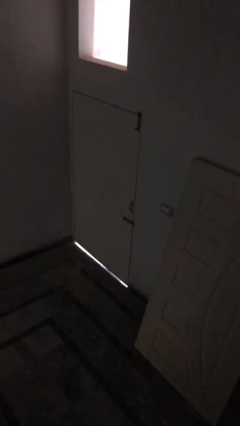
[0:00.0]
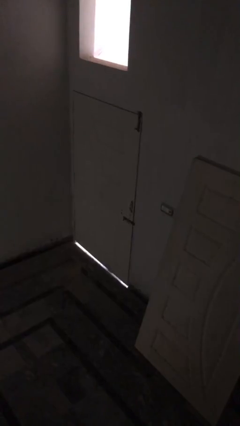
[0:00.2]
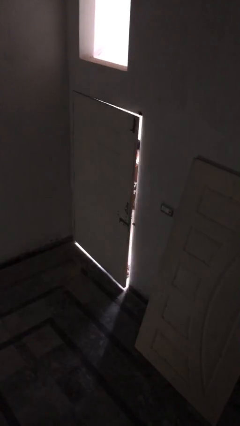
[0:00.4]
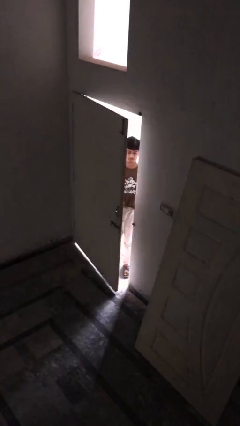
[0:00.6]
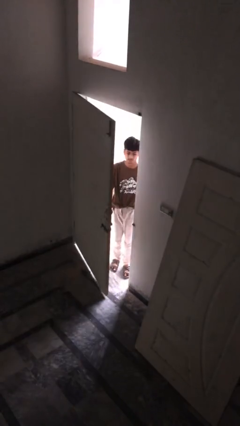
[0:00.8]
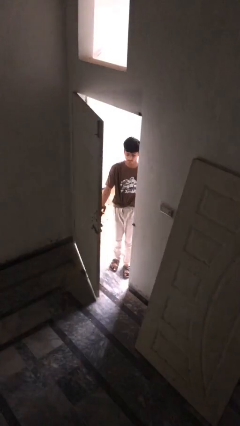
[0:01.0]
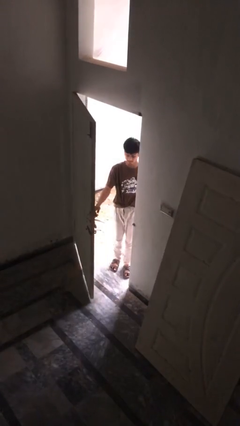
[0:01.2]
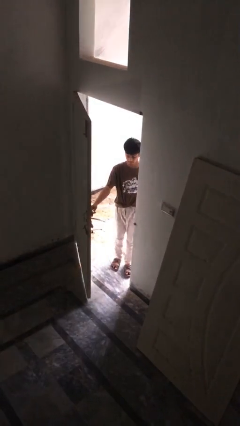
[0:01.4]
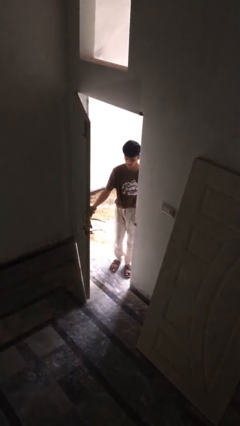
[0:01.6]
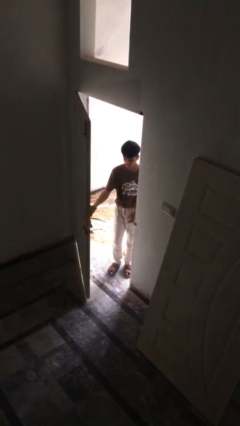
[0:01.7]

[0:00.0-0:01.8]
person opens facility door

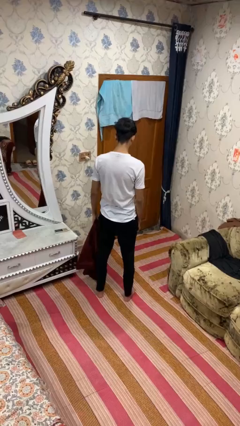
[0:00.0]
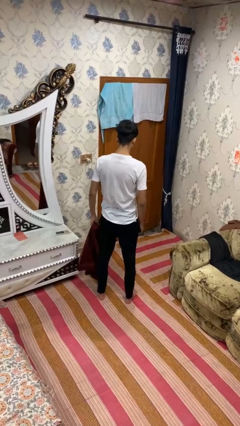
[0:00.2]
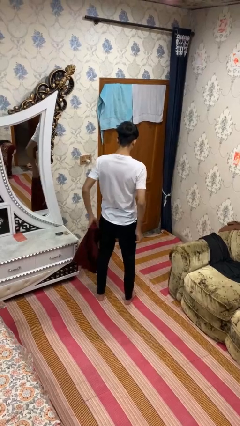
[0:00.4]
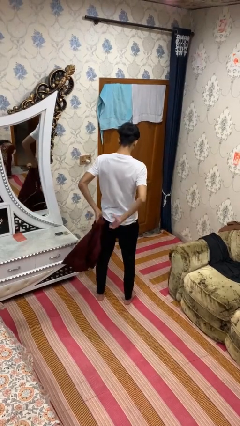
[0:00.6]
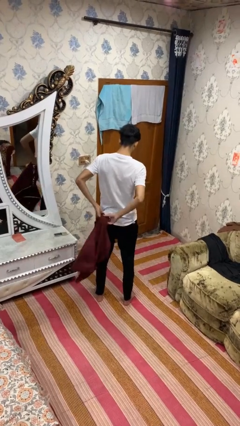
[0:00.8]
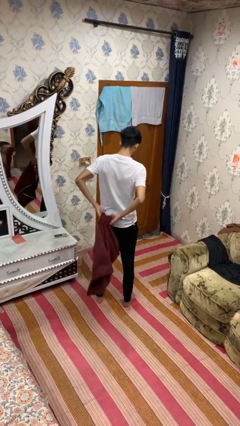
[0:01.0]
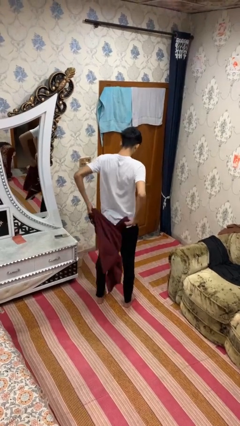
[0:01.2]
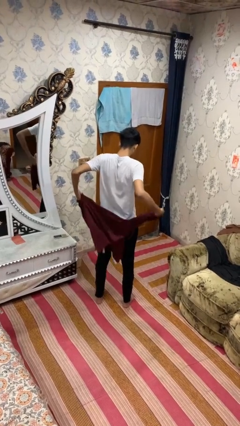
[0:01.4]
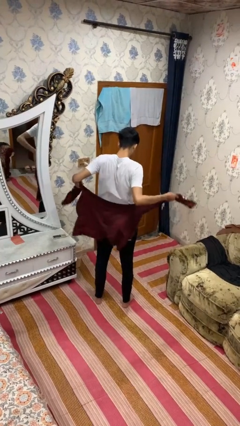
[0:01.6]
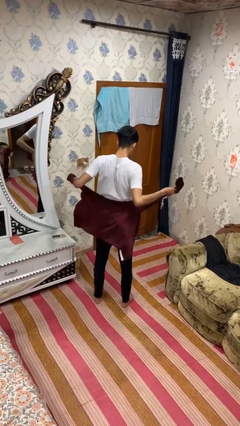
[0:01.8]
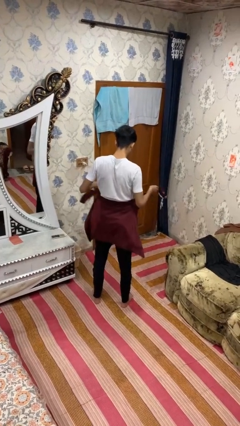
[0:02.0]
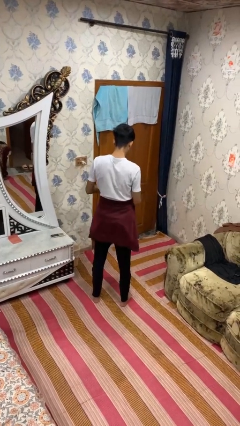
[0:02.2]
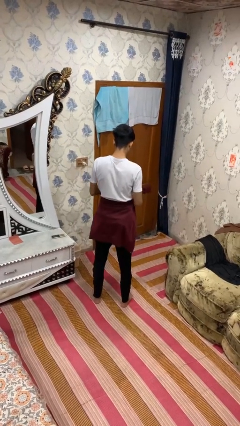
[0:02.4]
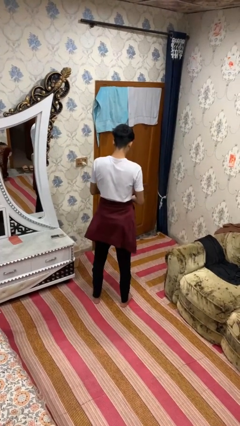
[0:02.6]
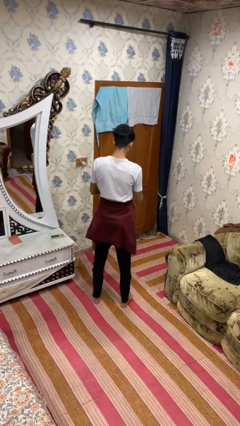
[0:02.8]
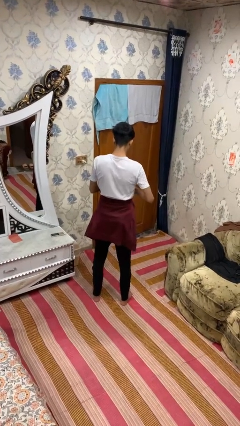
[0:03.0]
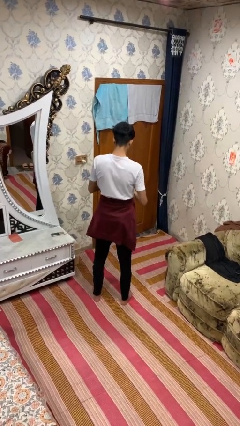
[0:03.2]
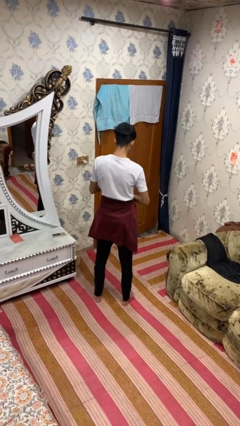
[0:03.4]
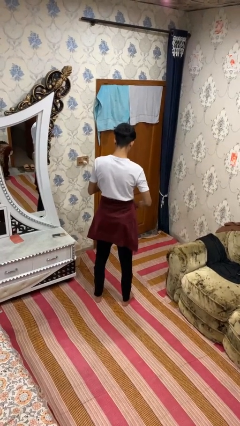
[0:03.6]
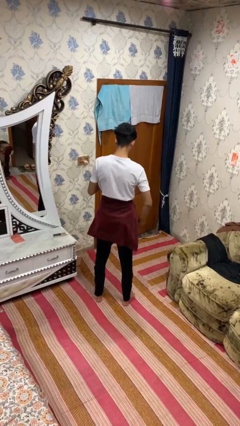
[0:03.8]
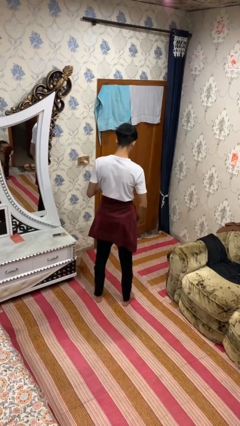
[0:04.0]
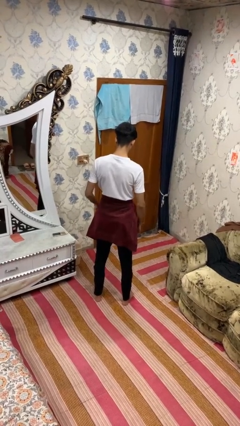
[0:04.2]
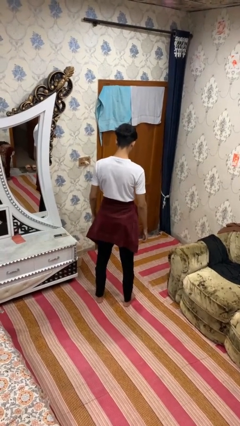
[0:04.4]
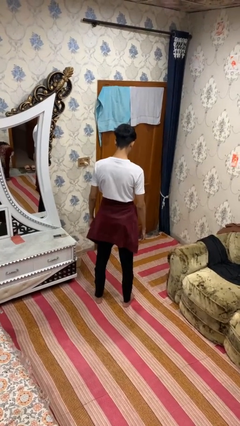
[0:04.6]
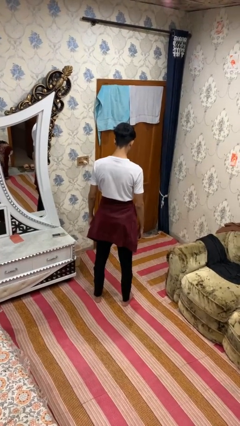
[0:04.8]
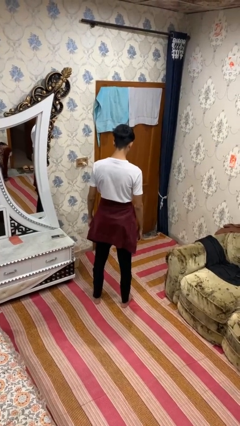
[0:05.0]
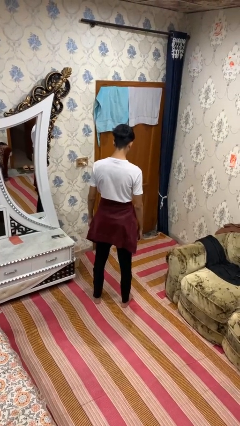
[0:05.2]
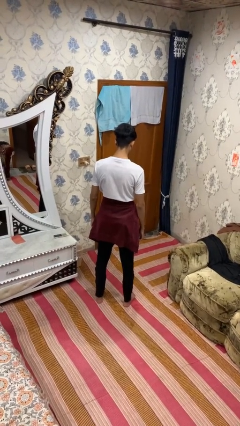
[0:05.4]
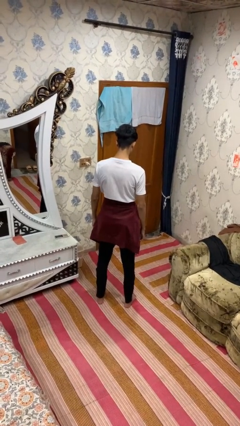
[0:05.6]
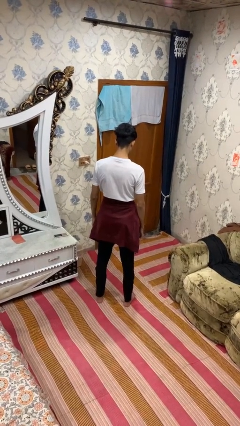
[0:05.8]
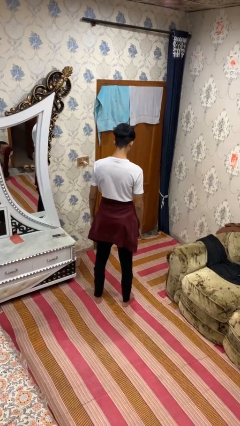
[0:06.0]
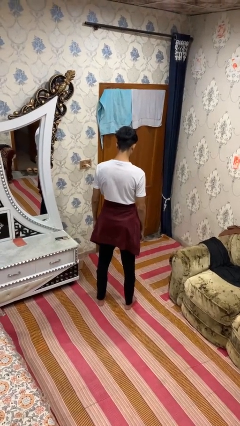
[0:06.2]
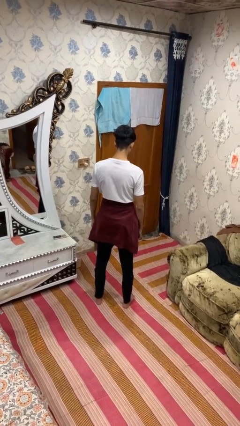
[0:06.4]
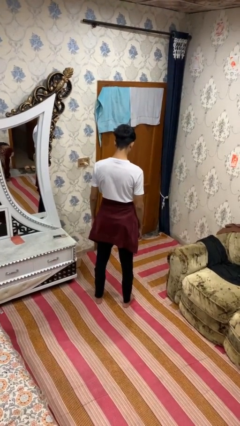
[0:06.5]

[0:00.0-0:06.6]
person ties jacket around waist

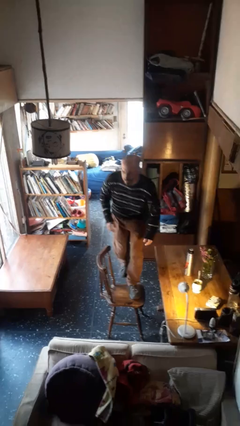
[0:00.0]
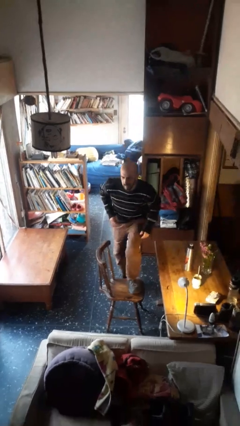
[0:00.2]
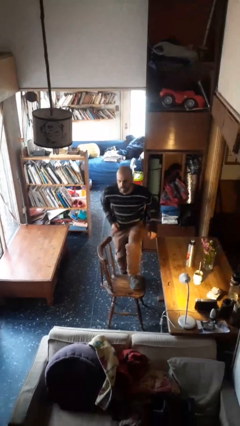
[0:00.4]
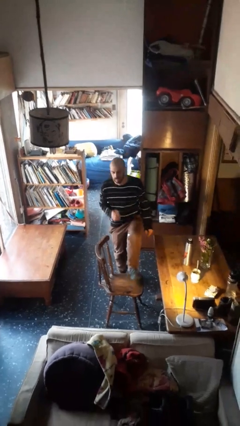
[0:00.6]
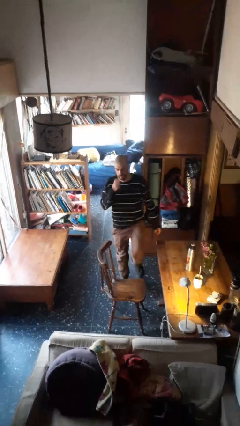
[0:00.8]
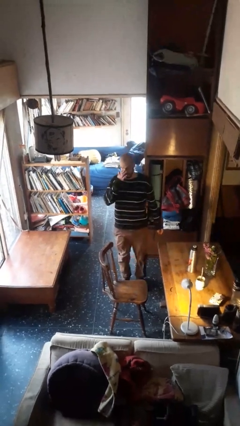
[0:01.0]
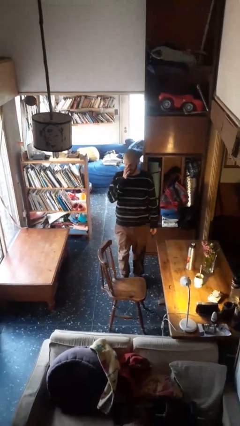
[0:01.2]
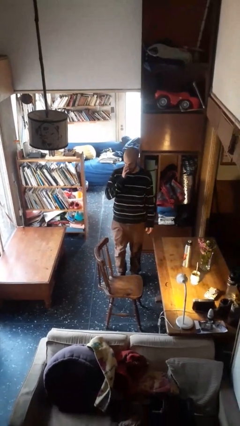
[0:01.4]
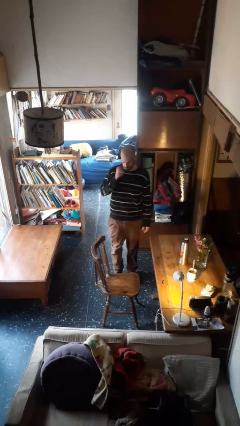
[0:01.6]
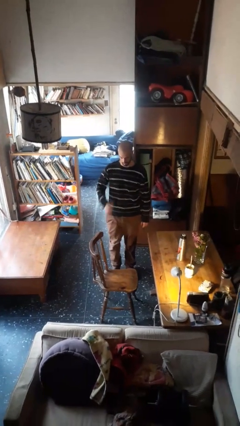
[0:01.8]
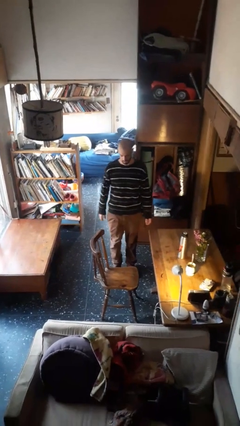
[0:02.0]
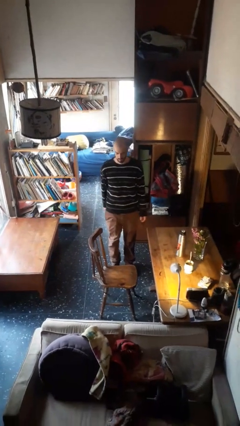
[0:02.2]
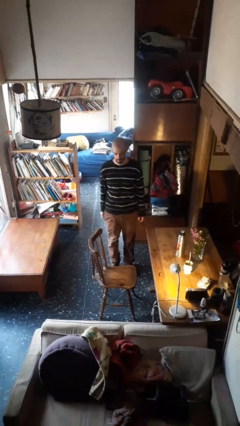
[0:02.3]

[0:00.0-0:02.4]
person climbs off chair

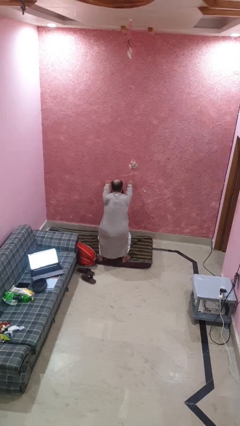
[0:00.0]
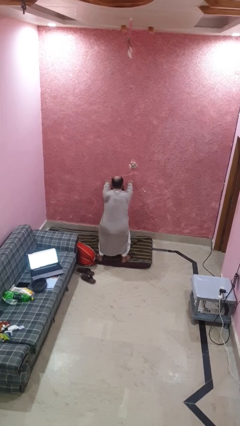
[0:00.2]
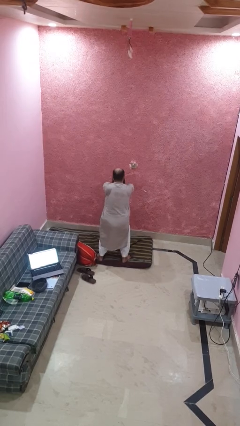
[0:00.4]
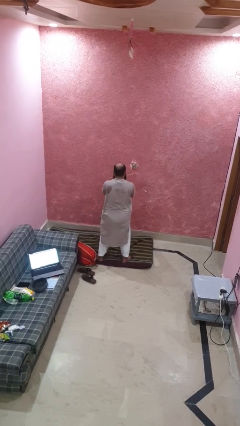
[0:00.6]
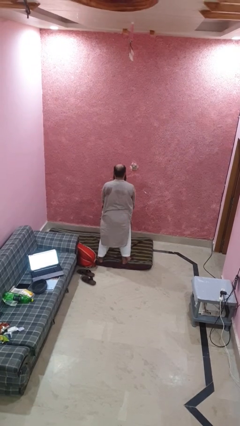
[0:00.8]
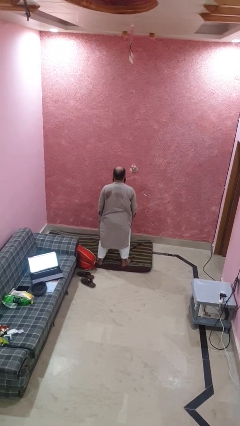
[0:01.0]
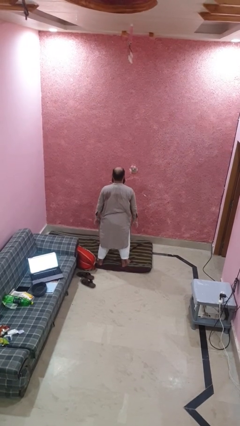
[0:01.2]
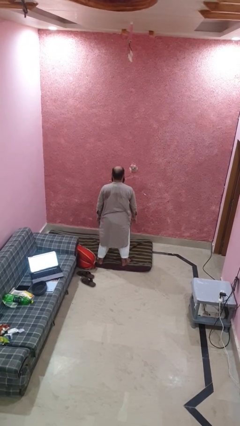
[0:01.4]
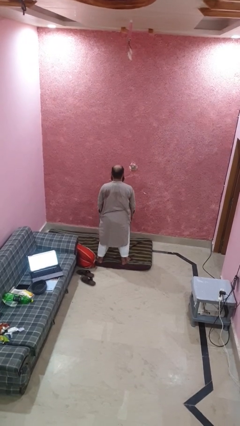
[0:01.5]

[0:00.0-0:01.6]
person stands up

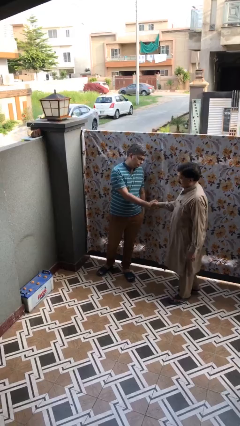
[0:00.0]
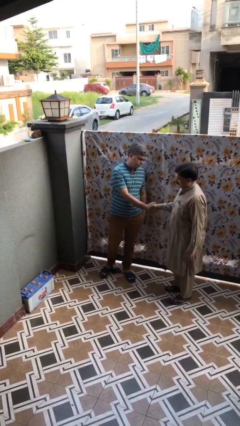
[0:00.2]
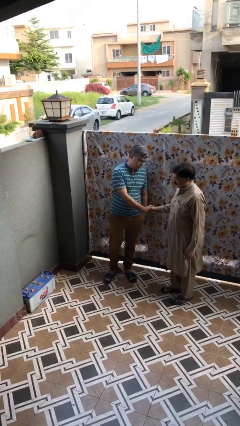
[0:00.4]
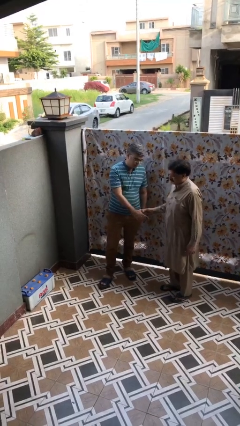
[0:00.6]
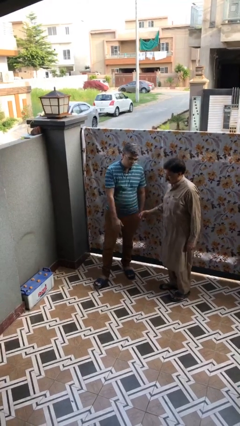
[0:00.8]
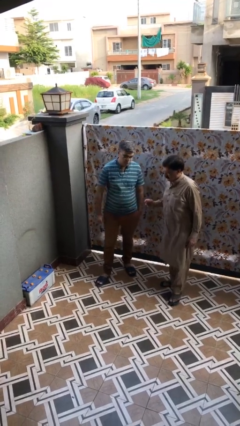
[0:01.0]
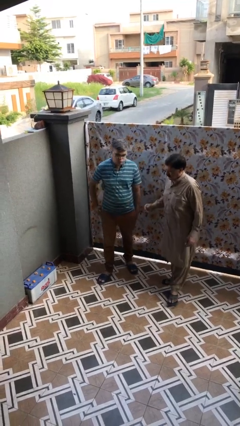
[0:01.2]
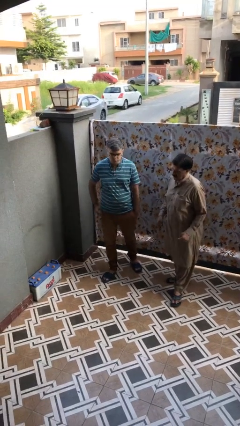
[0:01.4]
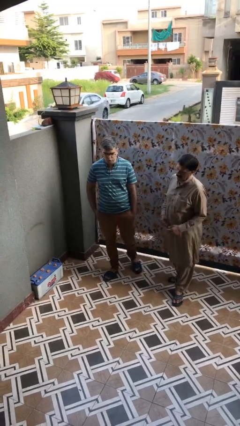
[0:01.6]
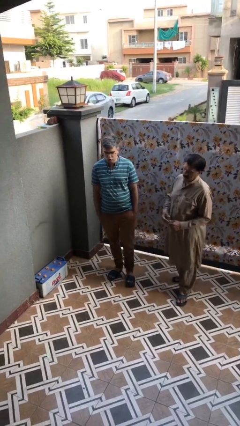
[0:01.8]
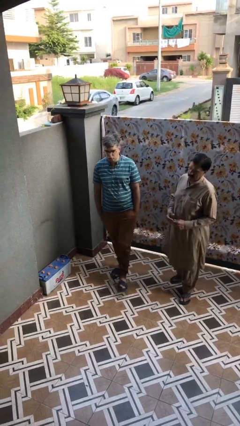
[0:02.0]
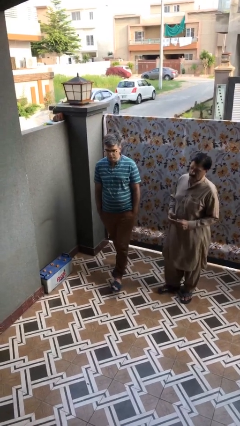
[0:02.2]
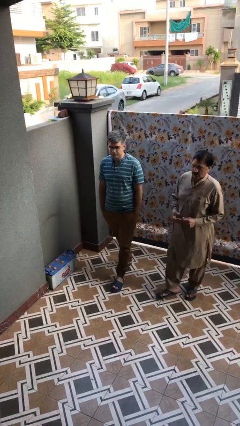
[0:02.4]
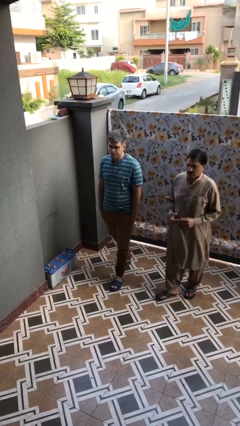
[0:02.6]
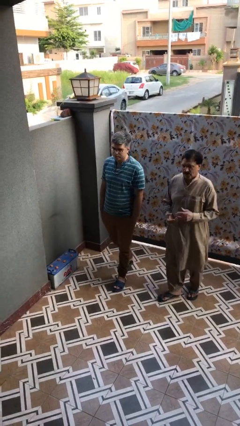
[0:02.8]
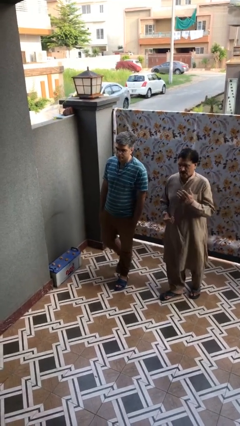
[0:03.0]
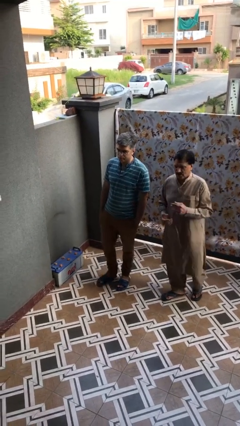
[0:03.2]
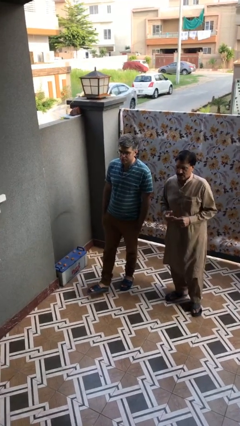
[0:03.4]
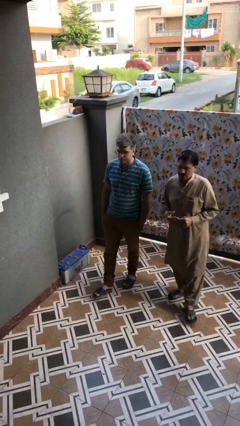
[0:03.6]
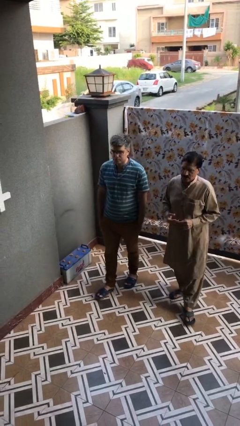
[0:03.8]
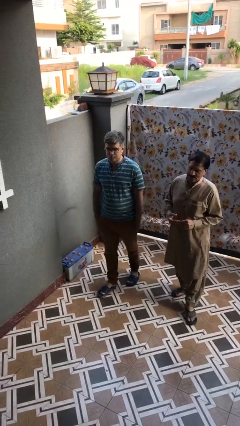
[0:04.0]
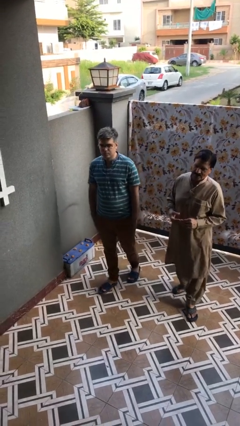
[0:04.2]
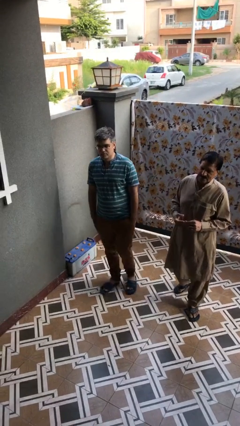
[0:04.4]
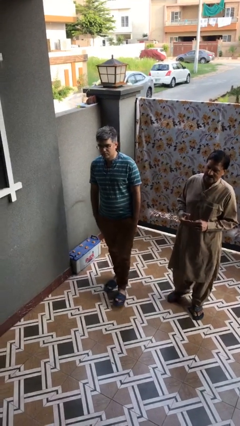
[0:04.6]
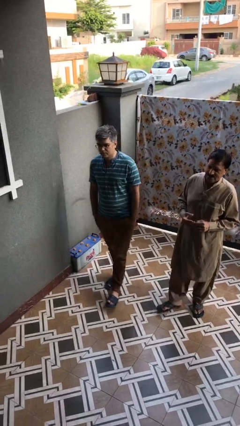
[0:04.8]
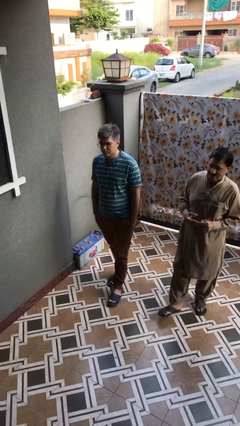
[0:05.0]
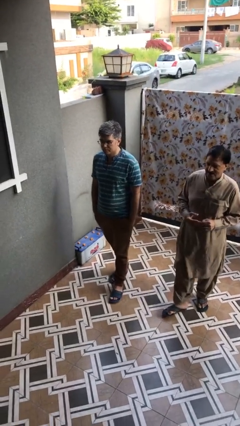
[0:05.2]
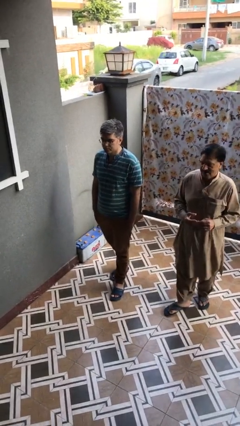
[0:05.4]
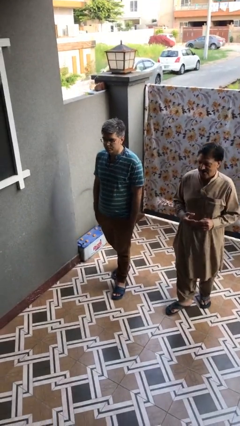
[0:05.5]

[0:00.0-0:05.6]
person talks to person
